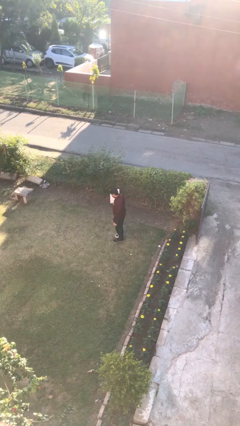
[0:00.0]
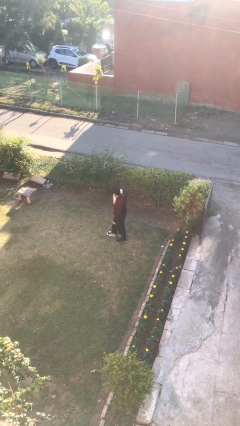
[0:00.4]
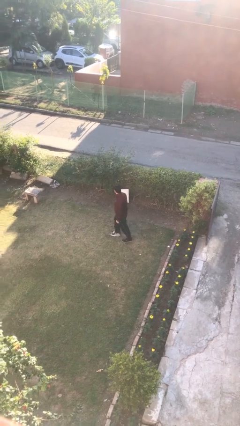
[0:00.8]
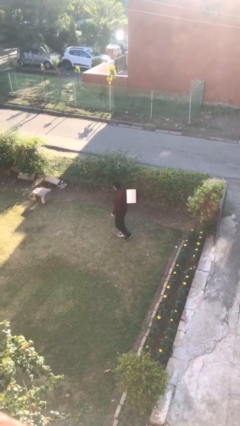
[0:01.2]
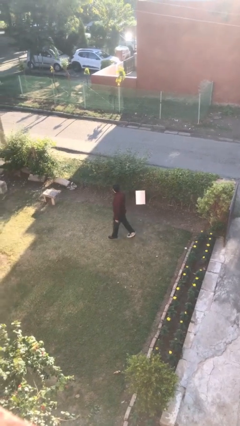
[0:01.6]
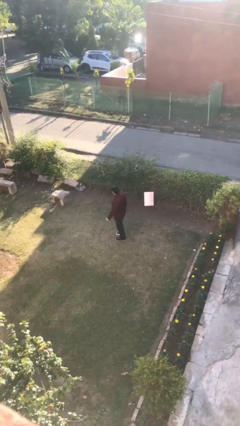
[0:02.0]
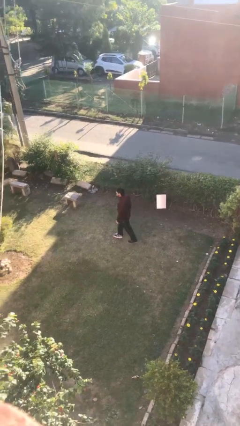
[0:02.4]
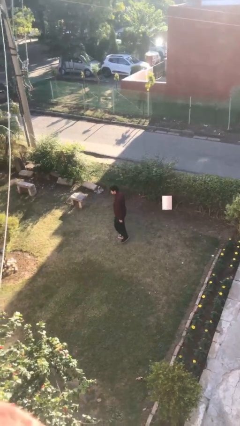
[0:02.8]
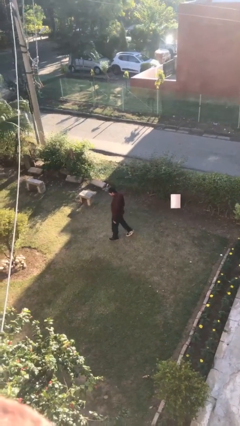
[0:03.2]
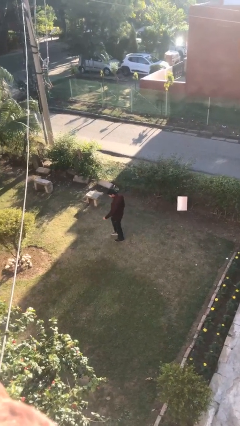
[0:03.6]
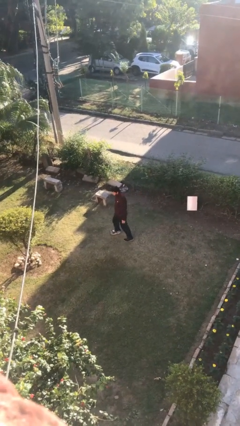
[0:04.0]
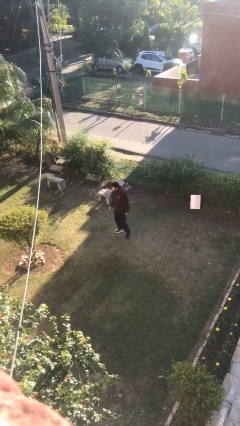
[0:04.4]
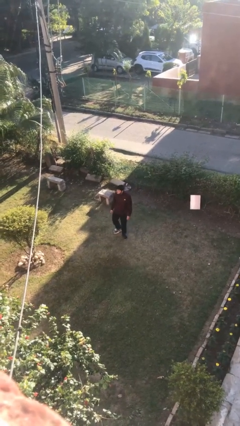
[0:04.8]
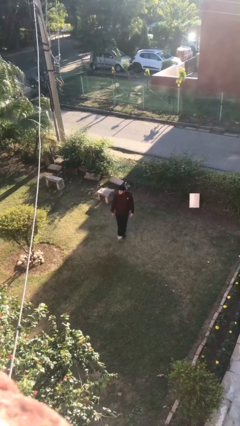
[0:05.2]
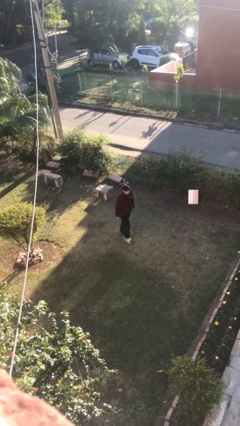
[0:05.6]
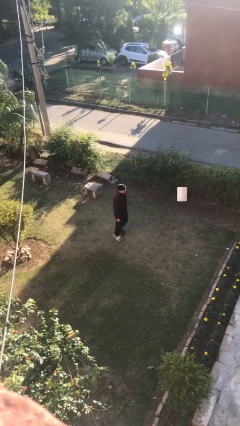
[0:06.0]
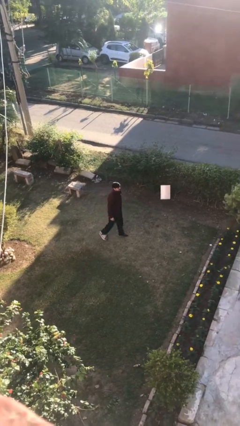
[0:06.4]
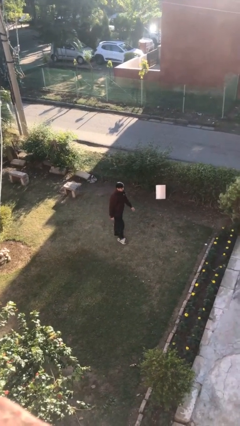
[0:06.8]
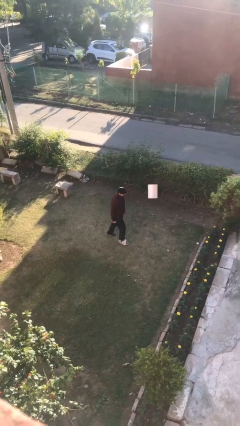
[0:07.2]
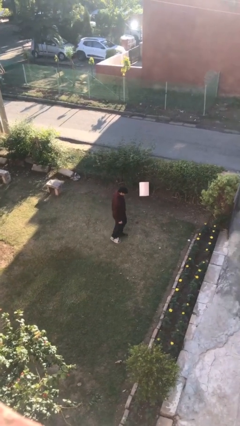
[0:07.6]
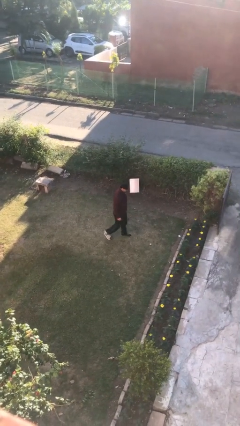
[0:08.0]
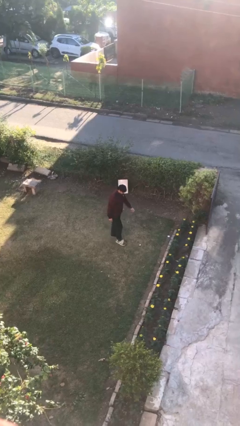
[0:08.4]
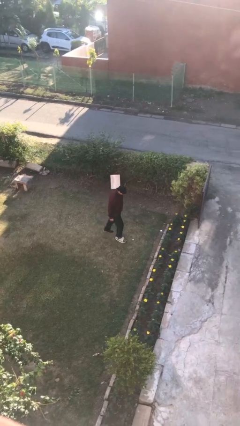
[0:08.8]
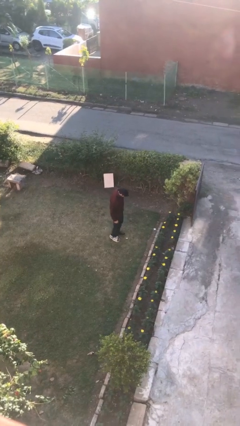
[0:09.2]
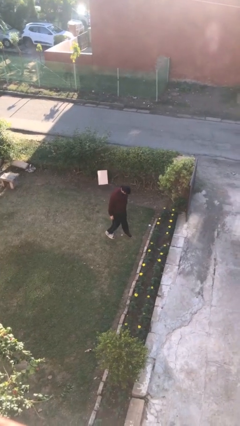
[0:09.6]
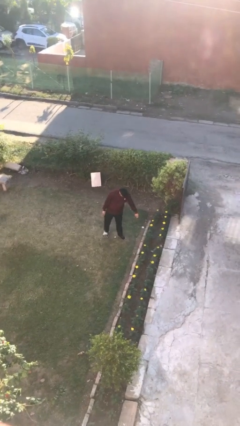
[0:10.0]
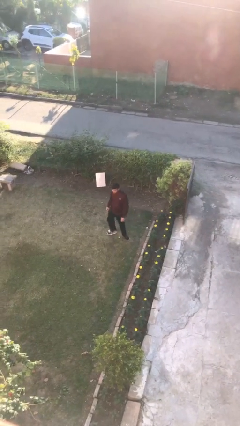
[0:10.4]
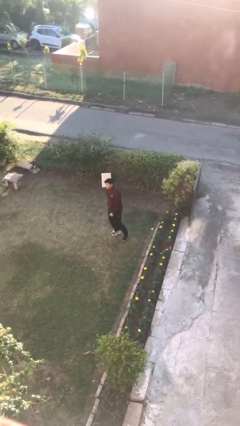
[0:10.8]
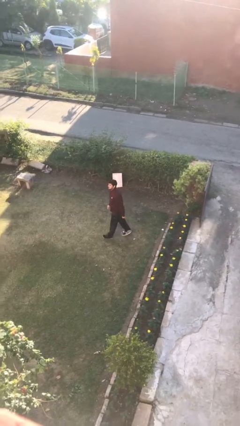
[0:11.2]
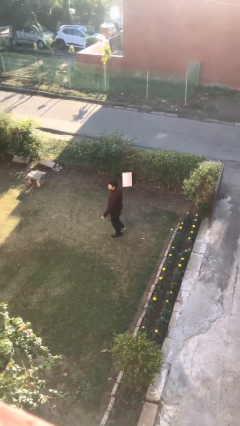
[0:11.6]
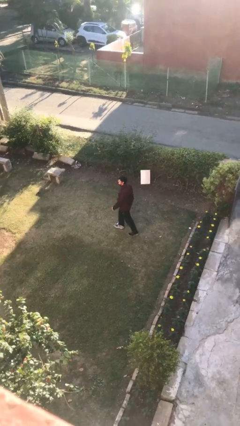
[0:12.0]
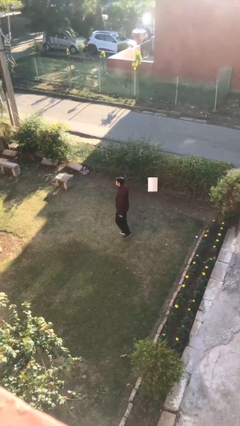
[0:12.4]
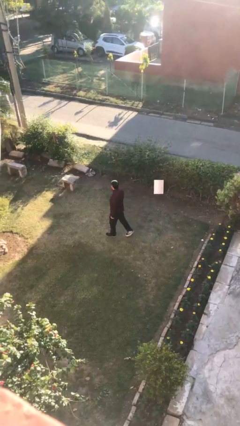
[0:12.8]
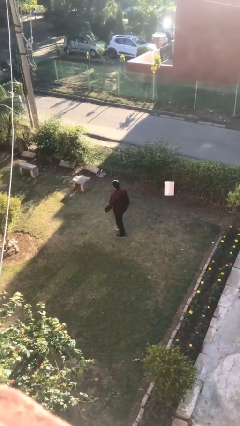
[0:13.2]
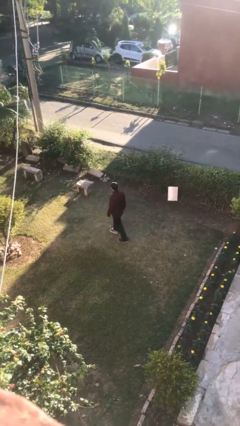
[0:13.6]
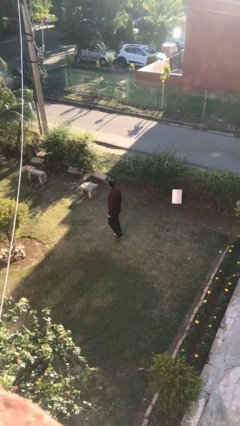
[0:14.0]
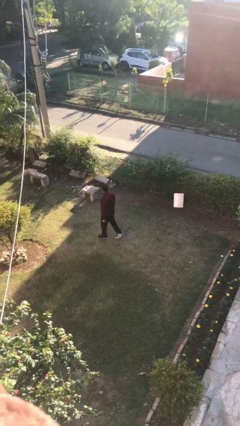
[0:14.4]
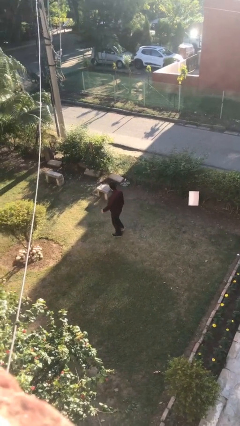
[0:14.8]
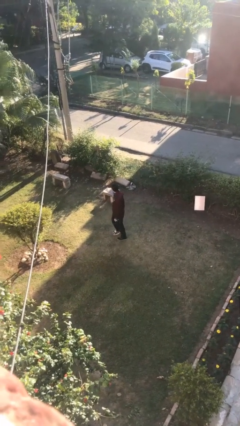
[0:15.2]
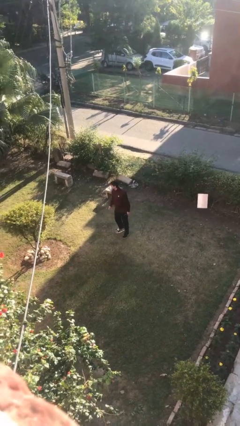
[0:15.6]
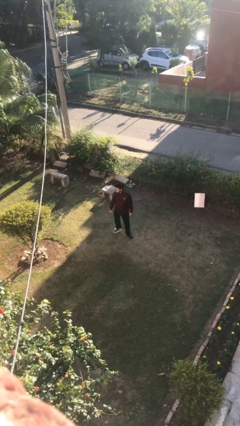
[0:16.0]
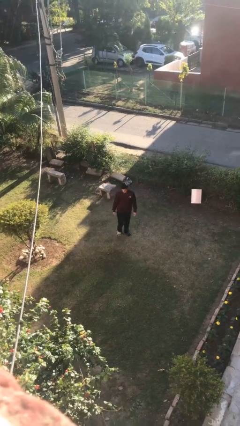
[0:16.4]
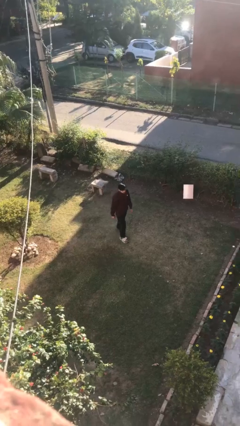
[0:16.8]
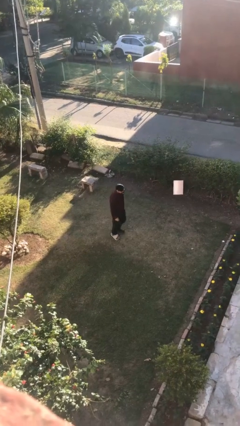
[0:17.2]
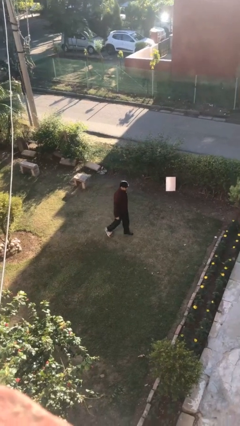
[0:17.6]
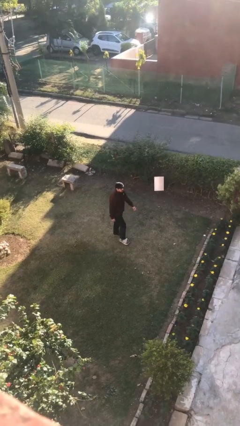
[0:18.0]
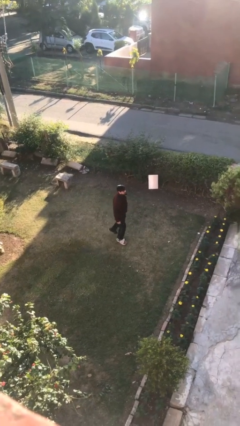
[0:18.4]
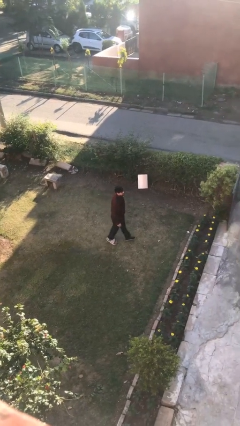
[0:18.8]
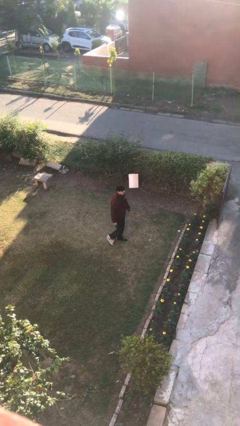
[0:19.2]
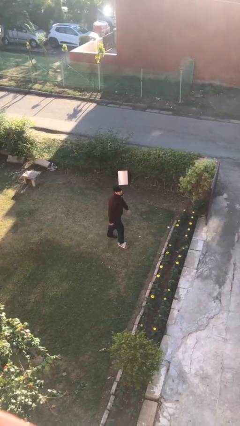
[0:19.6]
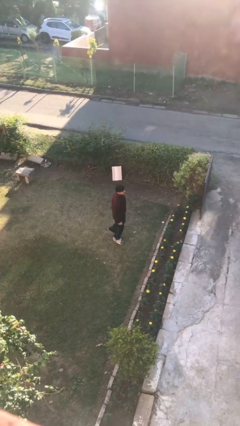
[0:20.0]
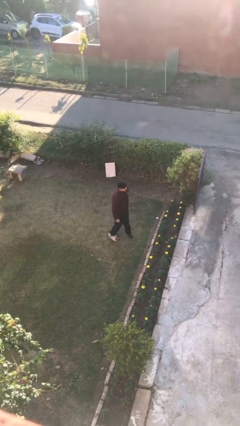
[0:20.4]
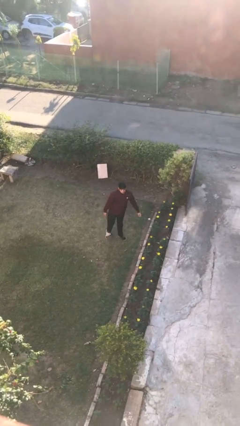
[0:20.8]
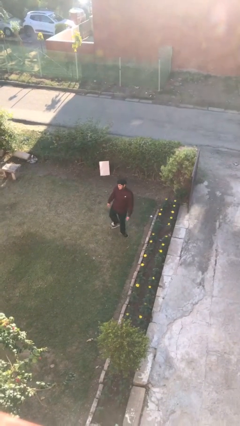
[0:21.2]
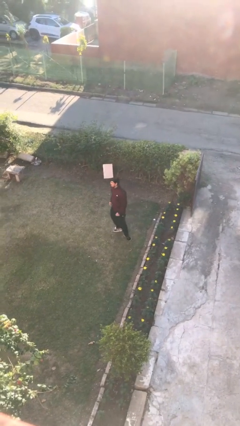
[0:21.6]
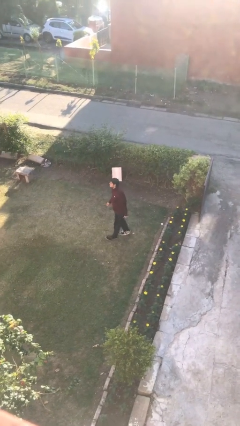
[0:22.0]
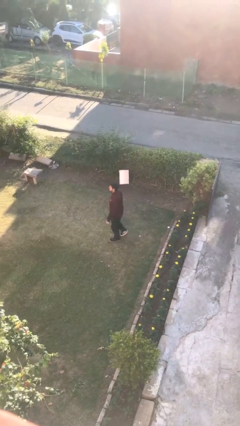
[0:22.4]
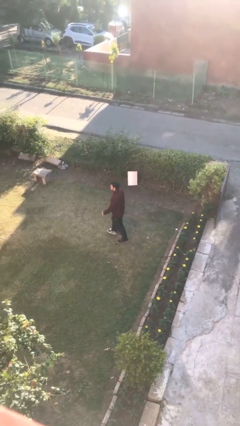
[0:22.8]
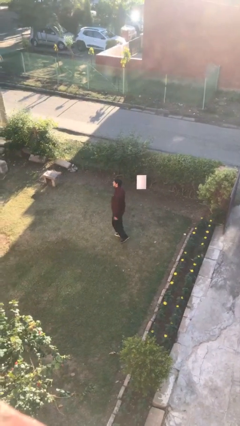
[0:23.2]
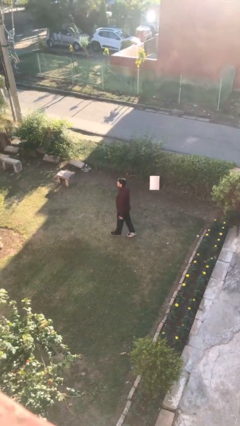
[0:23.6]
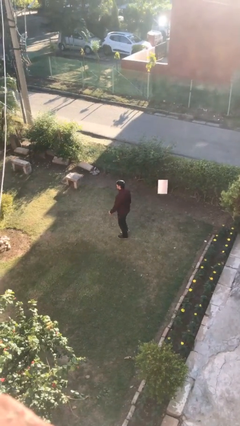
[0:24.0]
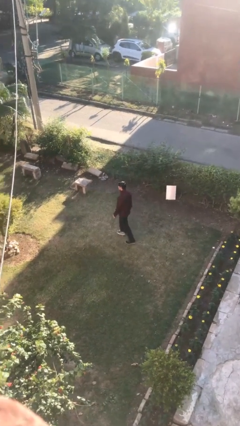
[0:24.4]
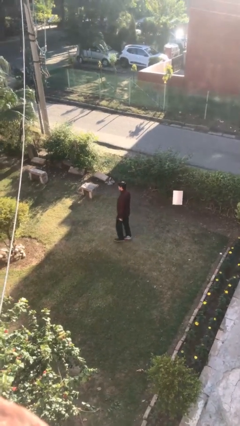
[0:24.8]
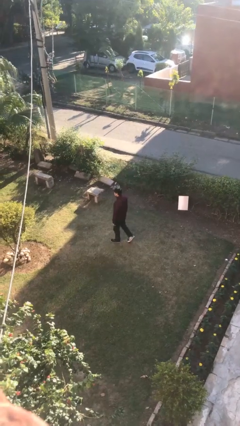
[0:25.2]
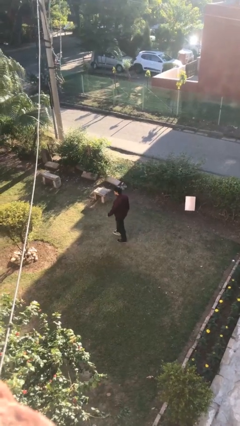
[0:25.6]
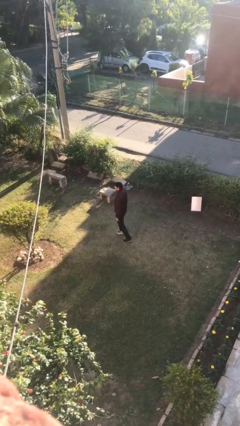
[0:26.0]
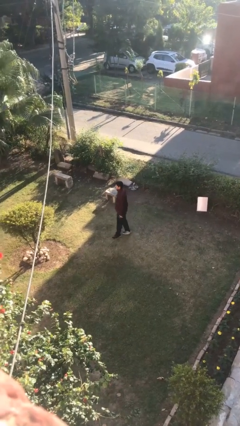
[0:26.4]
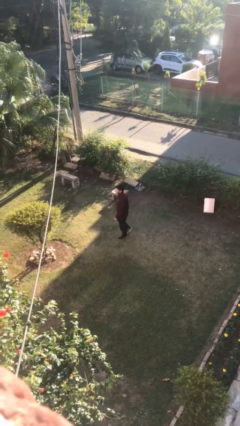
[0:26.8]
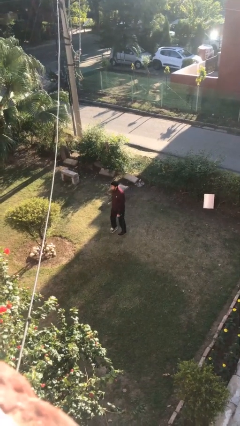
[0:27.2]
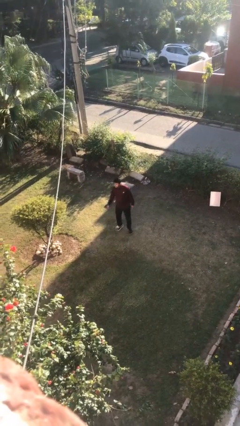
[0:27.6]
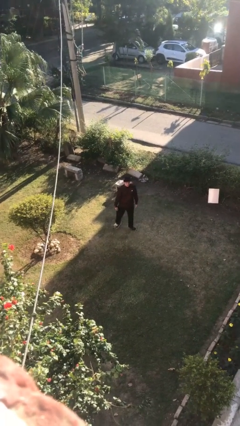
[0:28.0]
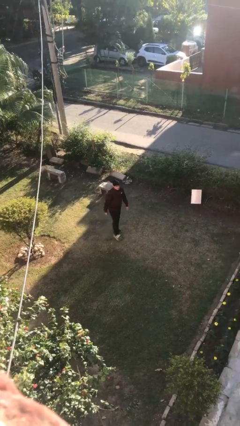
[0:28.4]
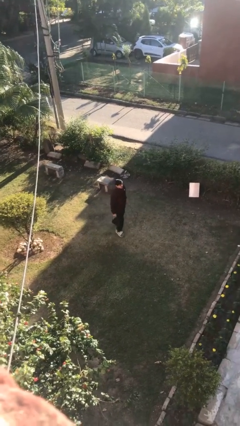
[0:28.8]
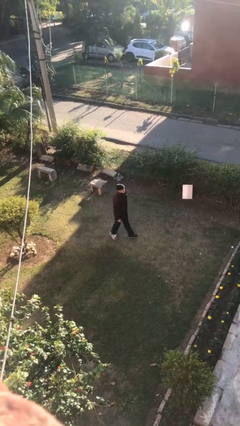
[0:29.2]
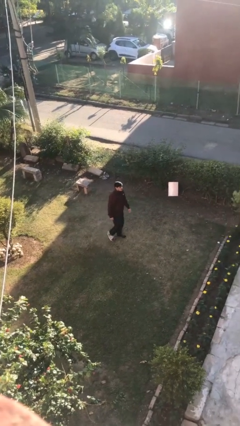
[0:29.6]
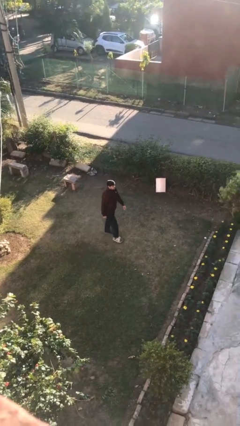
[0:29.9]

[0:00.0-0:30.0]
person walks

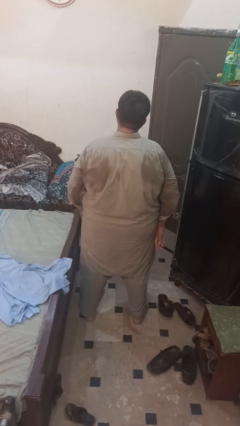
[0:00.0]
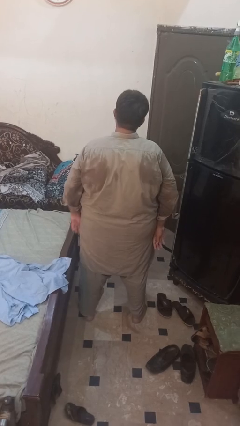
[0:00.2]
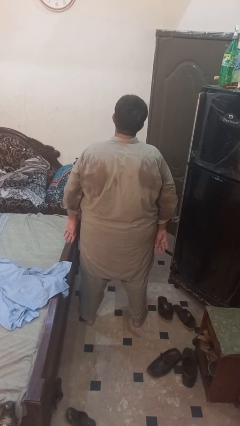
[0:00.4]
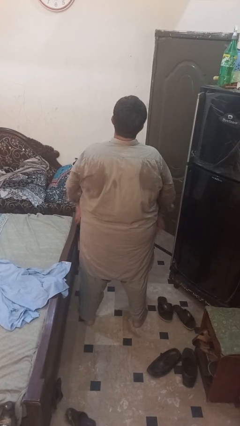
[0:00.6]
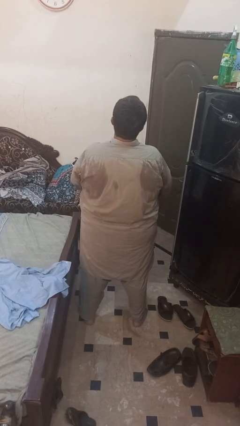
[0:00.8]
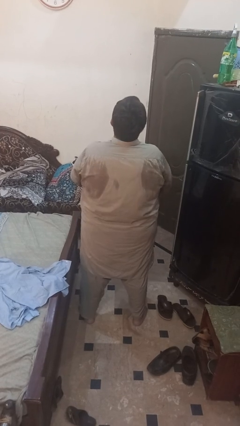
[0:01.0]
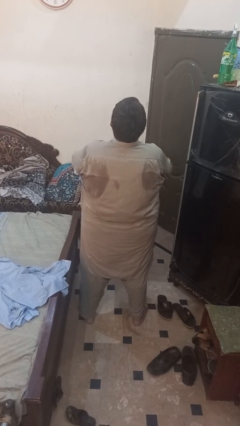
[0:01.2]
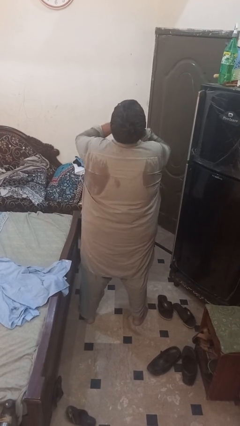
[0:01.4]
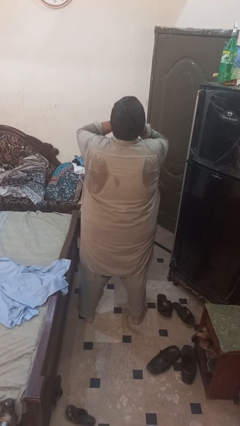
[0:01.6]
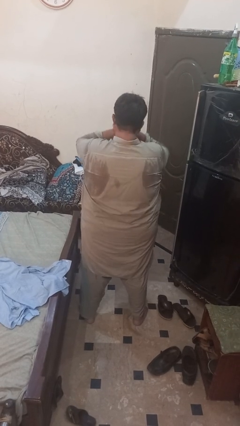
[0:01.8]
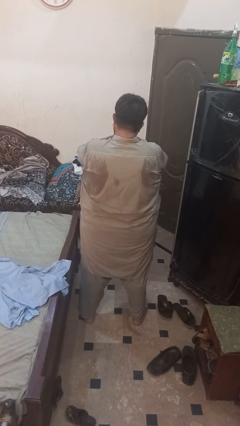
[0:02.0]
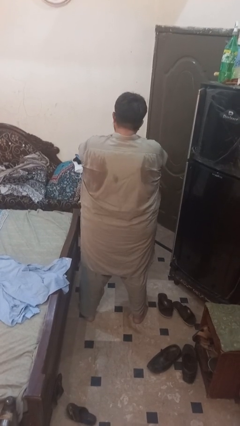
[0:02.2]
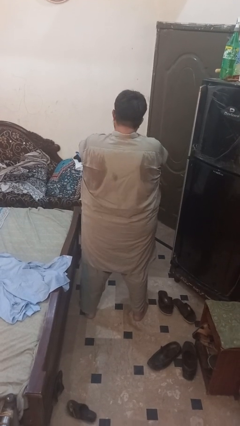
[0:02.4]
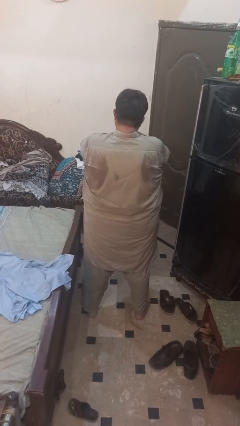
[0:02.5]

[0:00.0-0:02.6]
person sneezes into hand

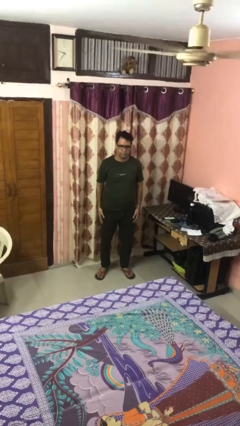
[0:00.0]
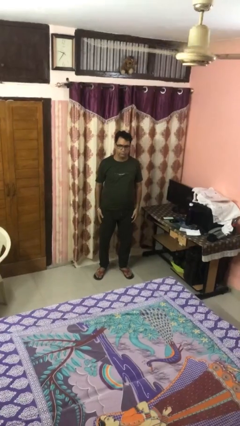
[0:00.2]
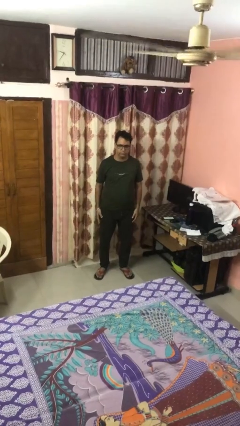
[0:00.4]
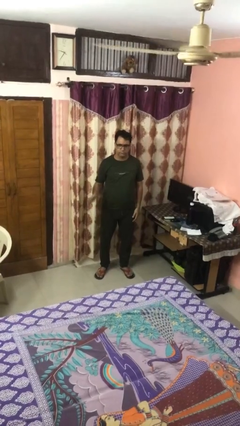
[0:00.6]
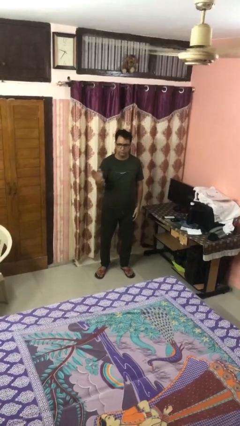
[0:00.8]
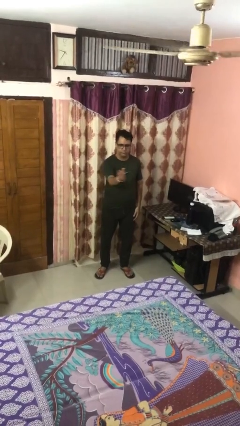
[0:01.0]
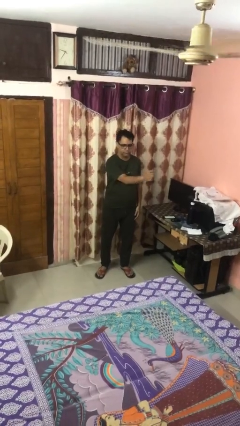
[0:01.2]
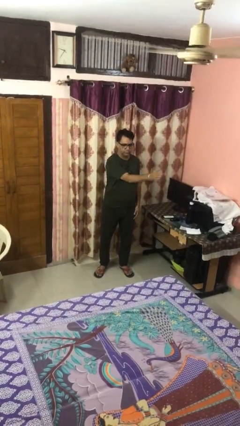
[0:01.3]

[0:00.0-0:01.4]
person gestures swipe left
